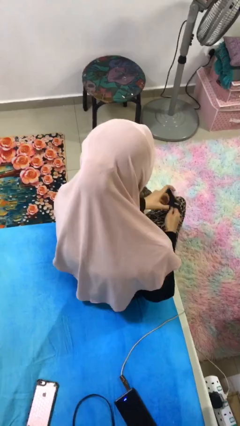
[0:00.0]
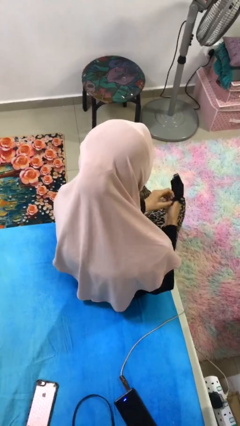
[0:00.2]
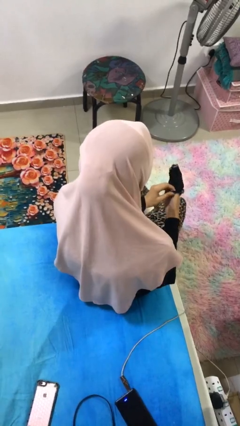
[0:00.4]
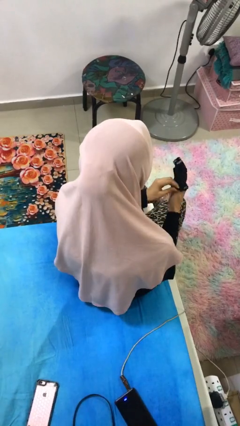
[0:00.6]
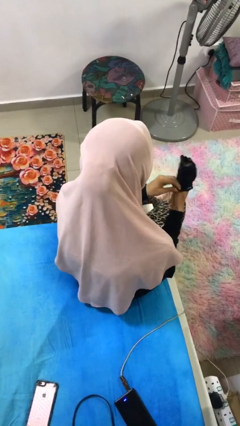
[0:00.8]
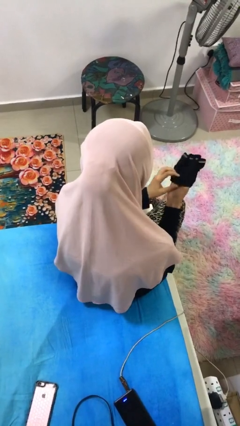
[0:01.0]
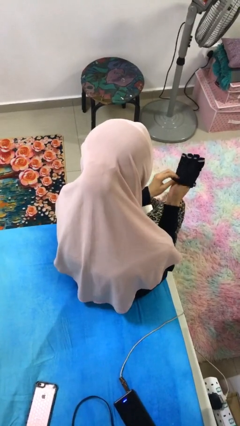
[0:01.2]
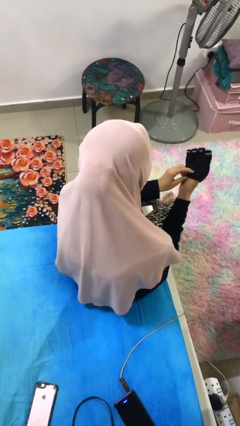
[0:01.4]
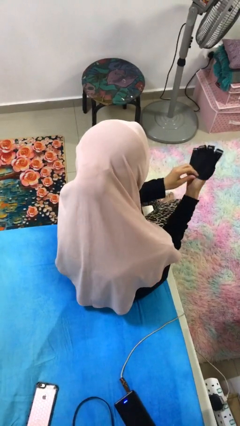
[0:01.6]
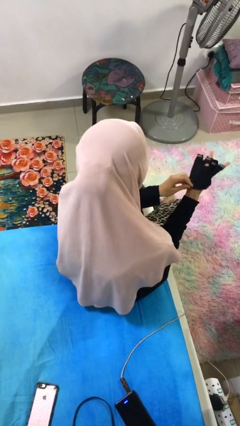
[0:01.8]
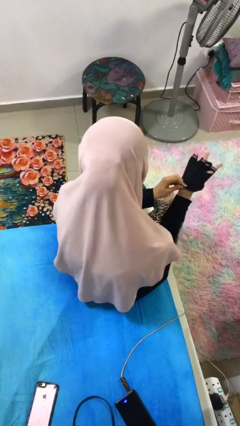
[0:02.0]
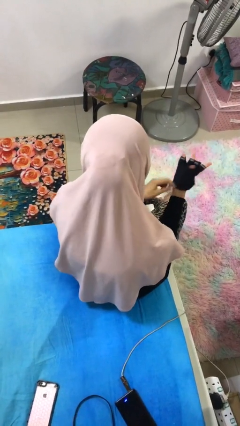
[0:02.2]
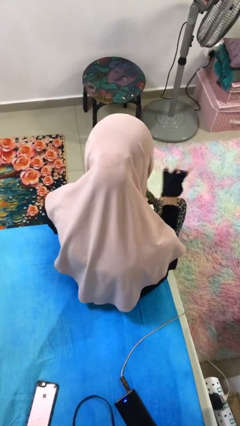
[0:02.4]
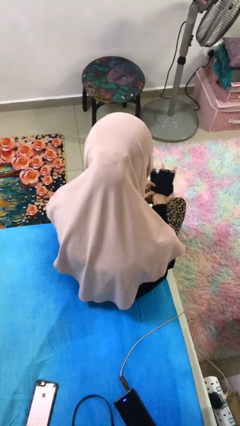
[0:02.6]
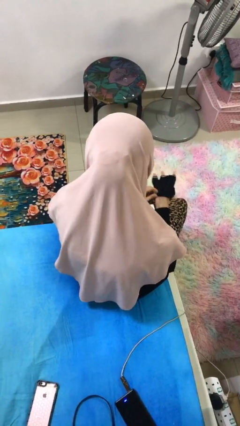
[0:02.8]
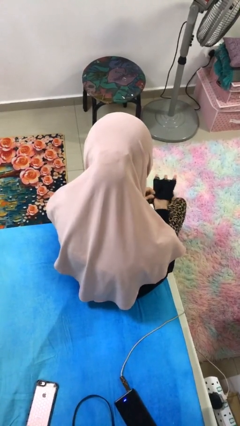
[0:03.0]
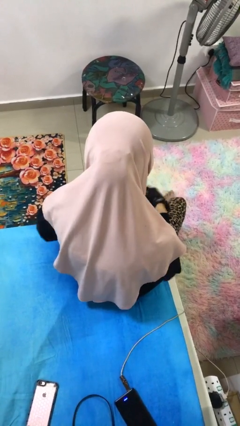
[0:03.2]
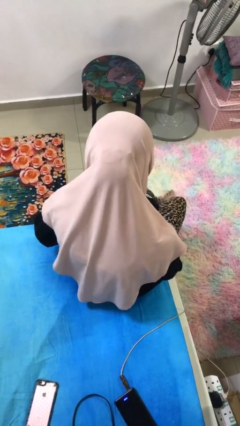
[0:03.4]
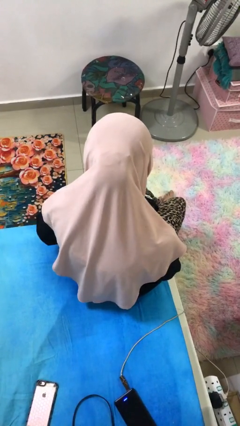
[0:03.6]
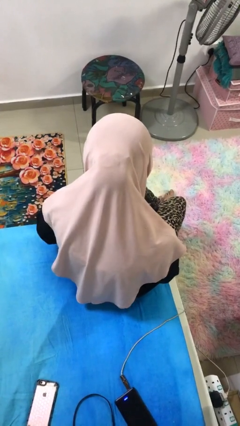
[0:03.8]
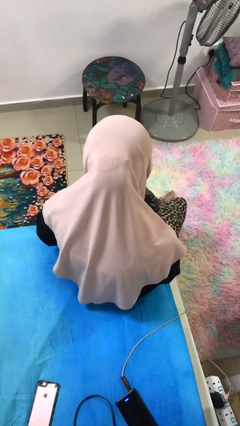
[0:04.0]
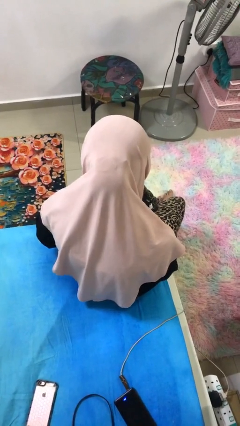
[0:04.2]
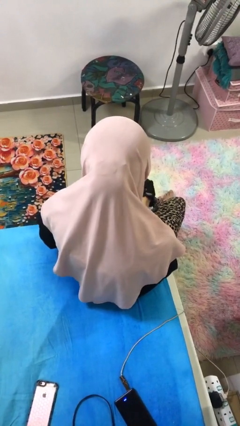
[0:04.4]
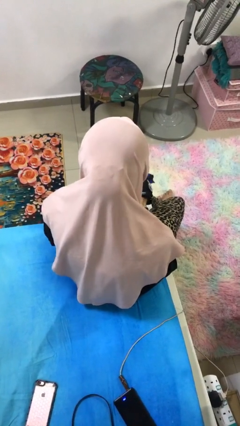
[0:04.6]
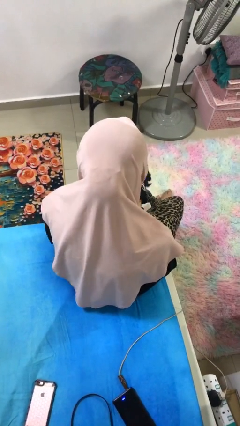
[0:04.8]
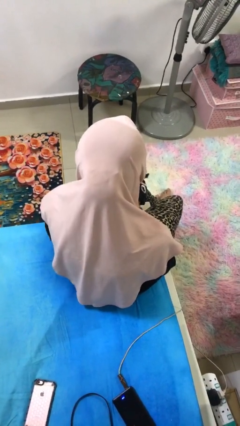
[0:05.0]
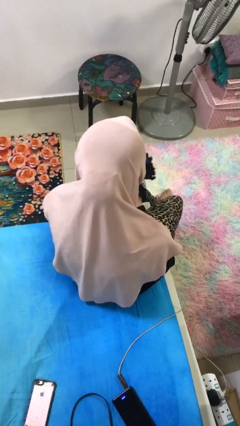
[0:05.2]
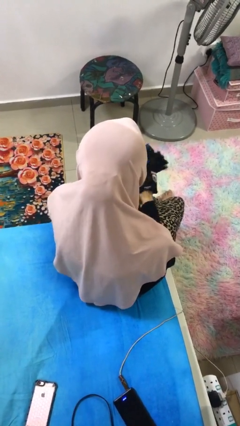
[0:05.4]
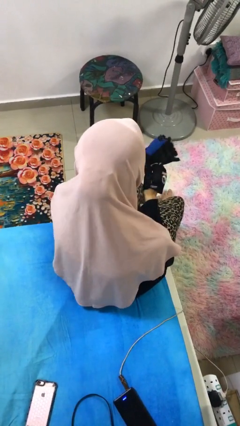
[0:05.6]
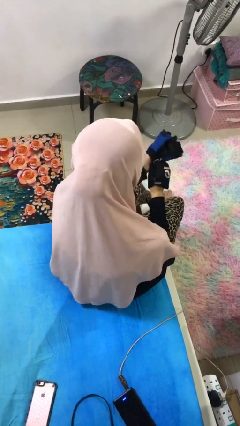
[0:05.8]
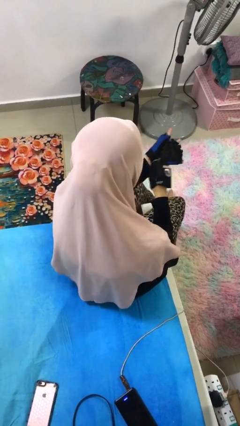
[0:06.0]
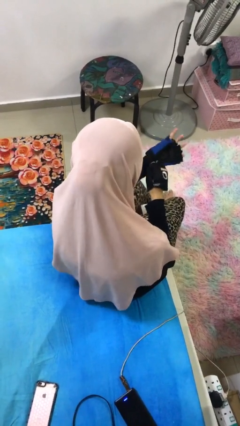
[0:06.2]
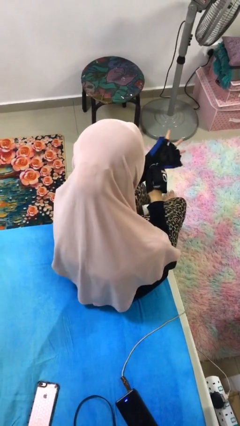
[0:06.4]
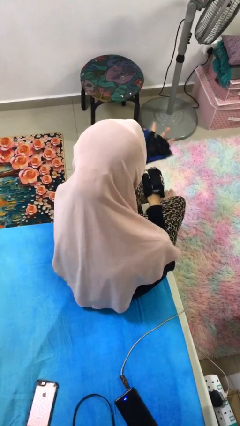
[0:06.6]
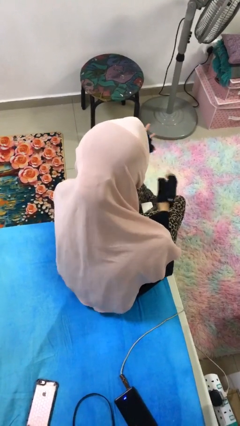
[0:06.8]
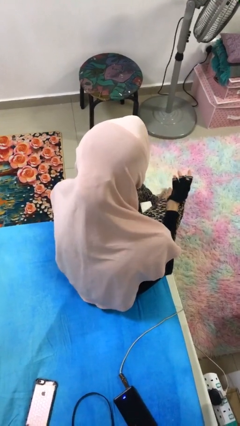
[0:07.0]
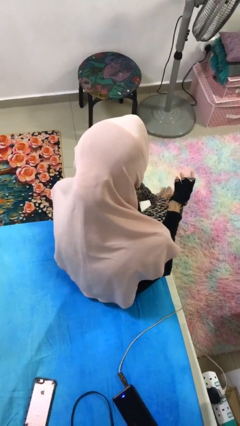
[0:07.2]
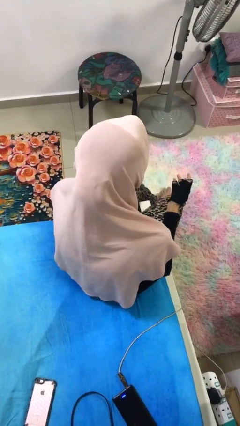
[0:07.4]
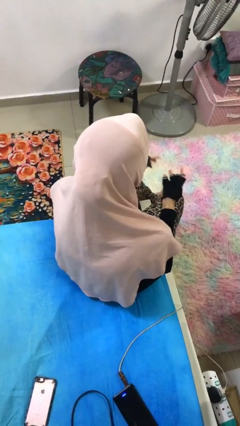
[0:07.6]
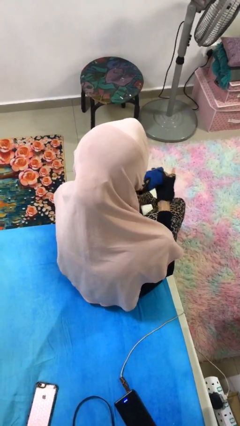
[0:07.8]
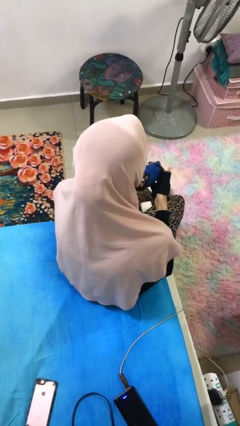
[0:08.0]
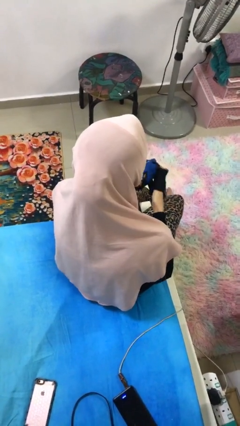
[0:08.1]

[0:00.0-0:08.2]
person puts on gloves

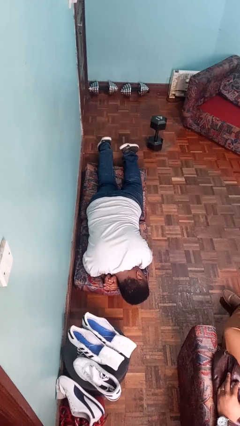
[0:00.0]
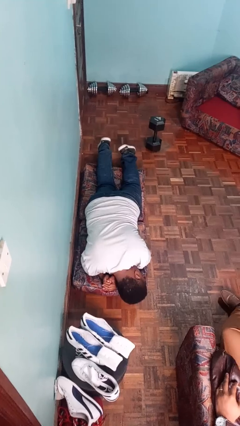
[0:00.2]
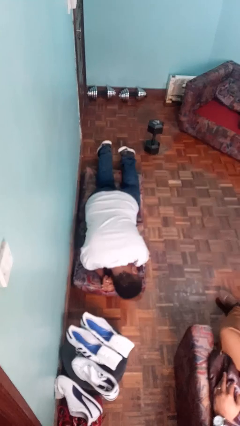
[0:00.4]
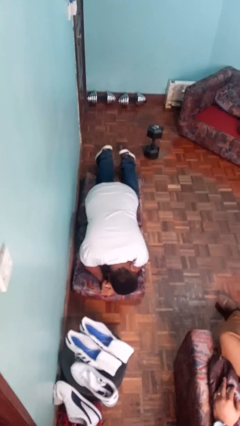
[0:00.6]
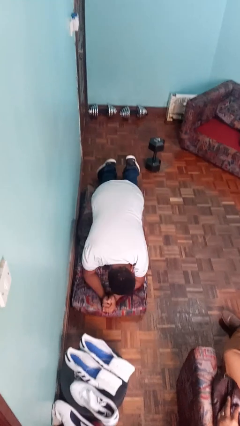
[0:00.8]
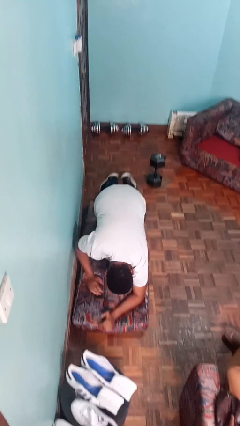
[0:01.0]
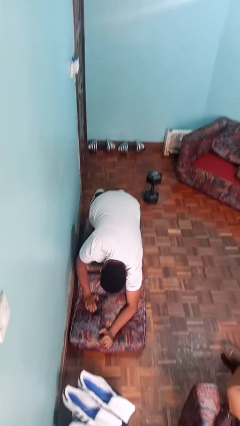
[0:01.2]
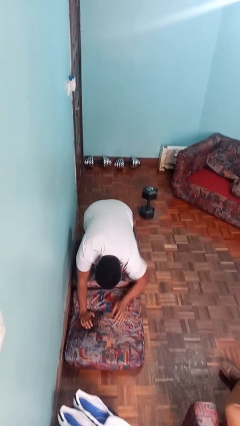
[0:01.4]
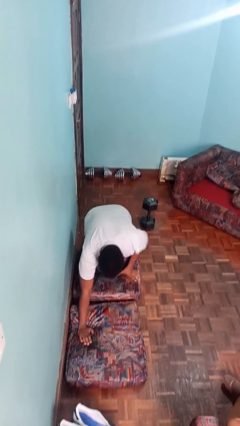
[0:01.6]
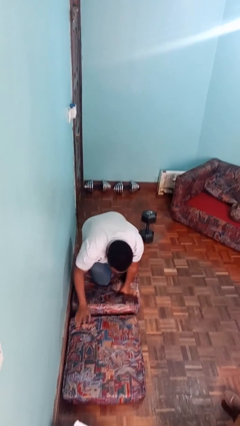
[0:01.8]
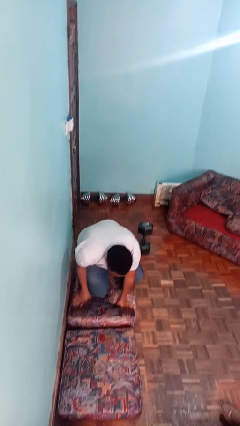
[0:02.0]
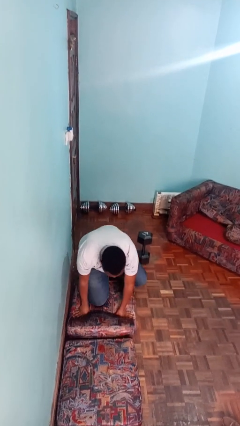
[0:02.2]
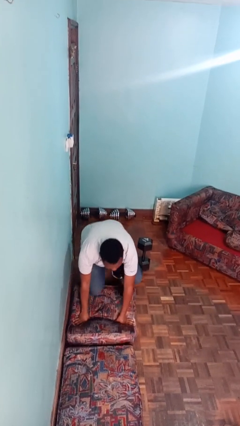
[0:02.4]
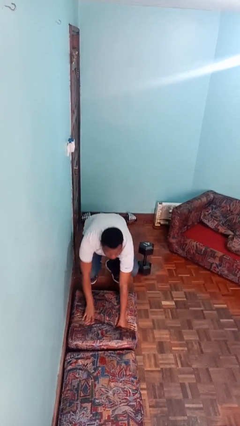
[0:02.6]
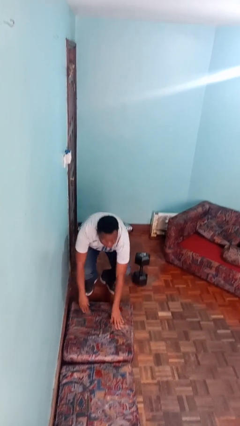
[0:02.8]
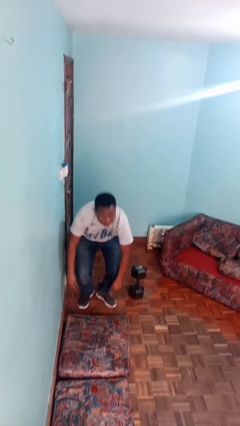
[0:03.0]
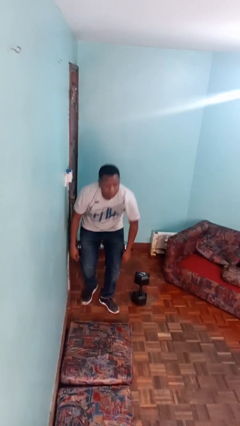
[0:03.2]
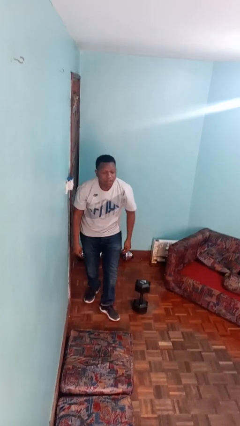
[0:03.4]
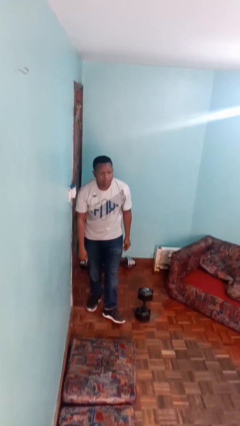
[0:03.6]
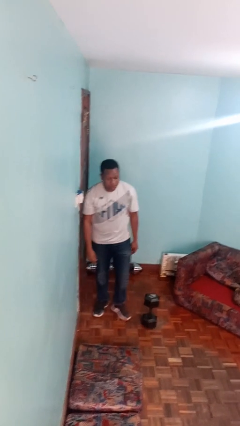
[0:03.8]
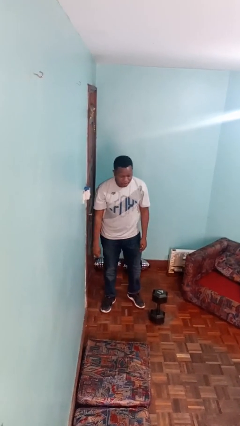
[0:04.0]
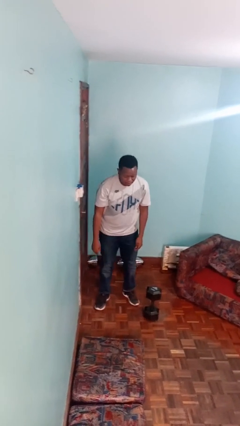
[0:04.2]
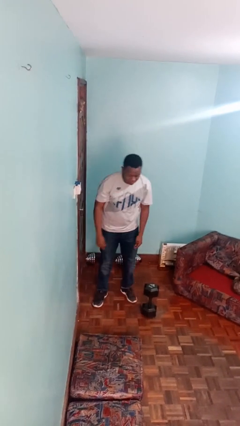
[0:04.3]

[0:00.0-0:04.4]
person stands up from floor

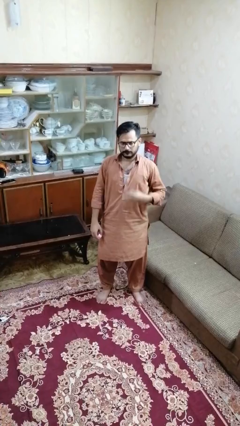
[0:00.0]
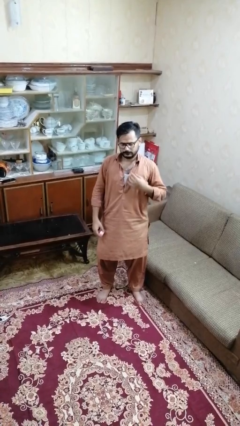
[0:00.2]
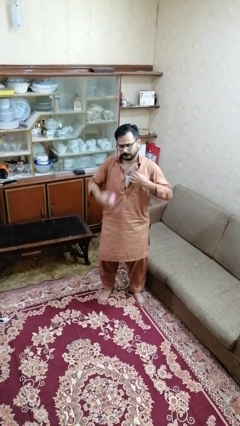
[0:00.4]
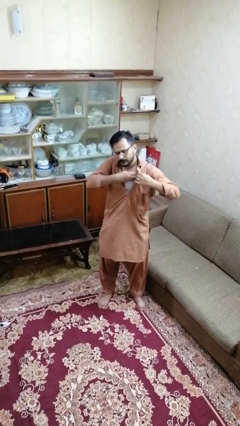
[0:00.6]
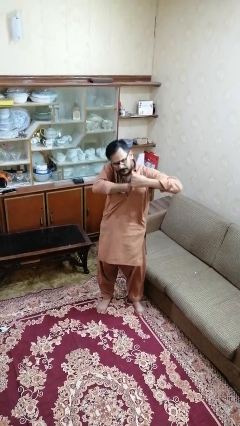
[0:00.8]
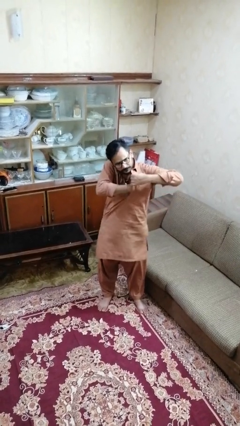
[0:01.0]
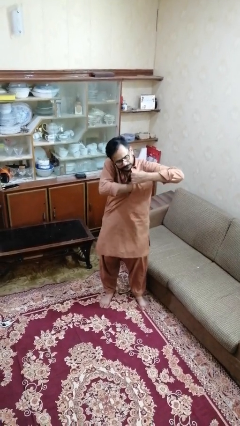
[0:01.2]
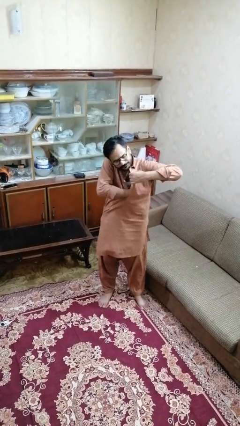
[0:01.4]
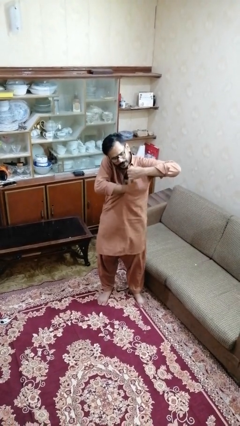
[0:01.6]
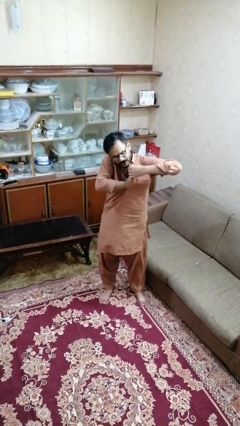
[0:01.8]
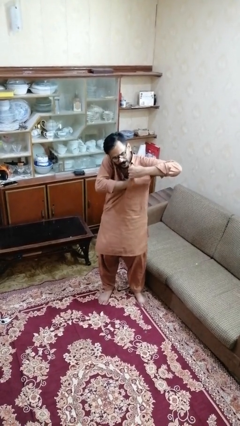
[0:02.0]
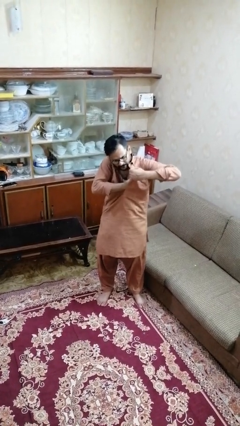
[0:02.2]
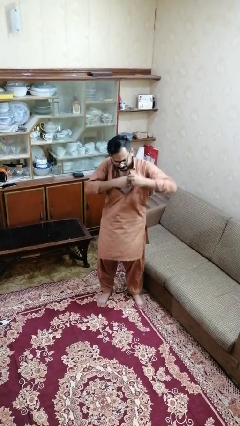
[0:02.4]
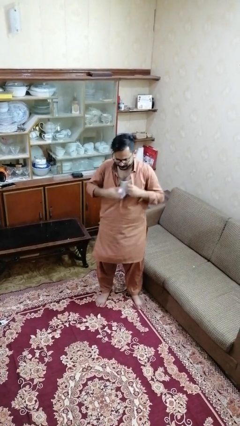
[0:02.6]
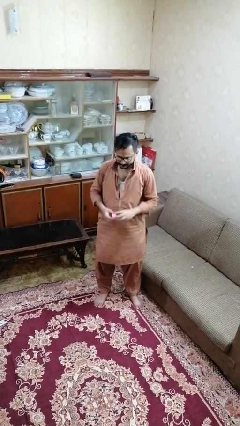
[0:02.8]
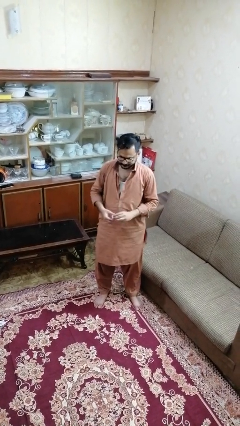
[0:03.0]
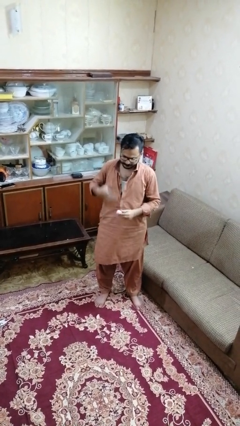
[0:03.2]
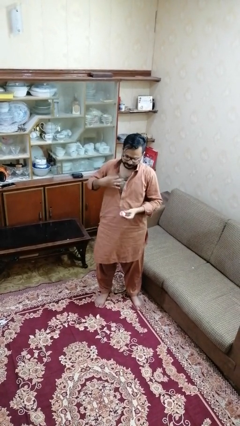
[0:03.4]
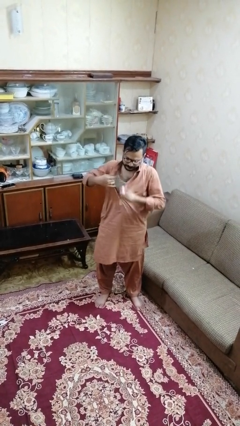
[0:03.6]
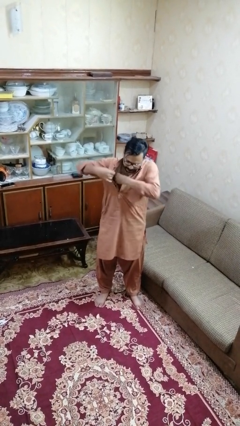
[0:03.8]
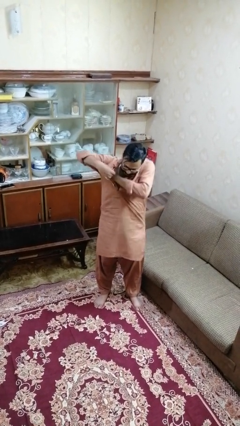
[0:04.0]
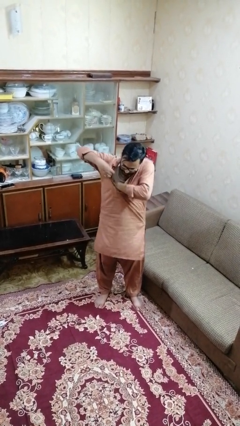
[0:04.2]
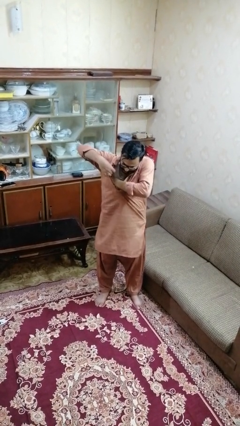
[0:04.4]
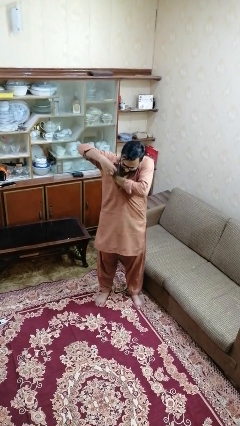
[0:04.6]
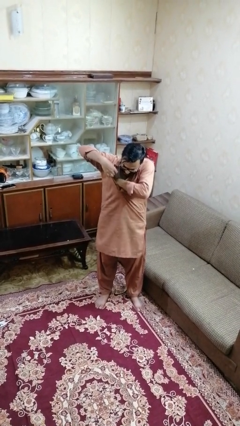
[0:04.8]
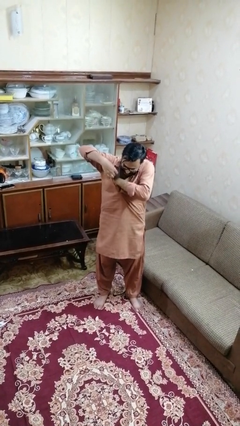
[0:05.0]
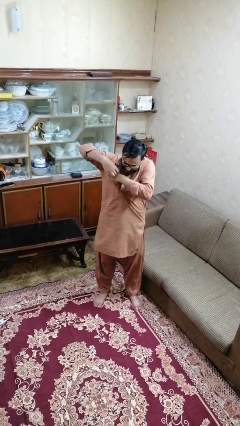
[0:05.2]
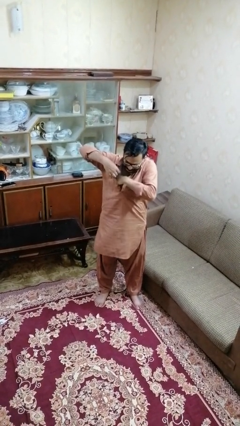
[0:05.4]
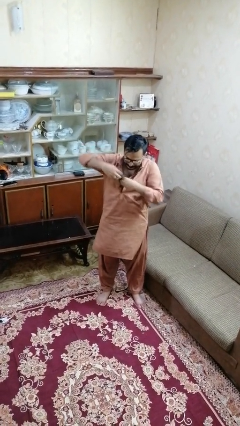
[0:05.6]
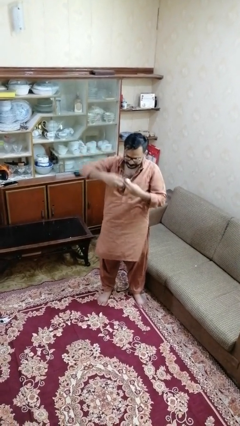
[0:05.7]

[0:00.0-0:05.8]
person applies deodorant
